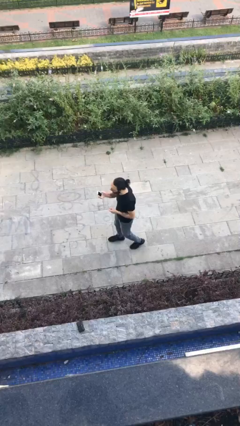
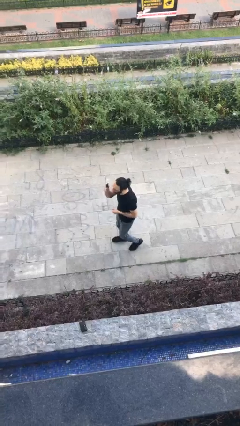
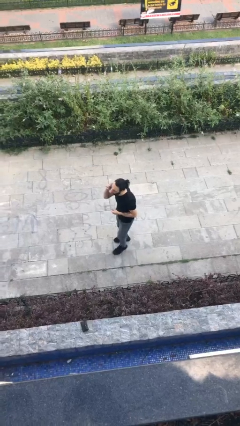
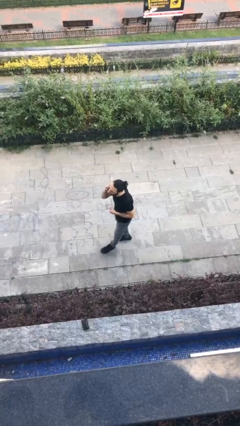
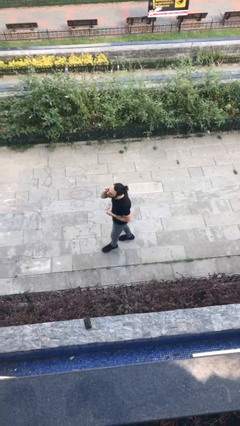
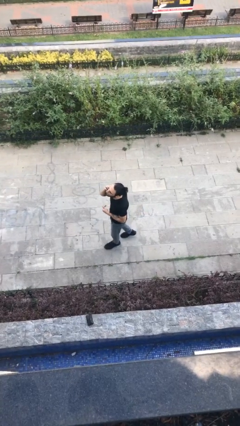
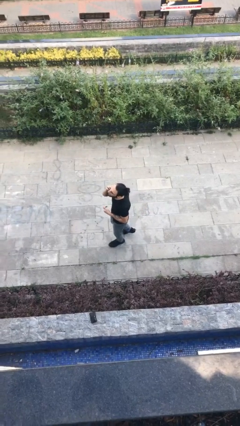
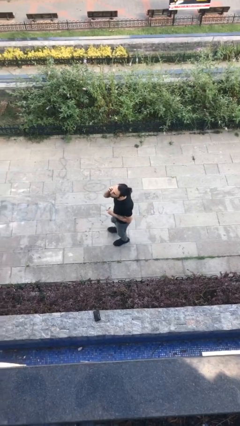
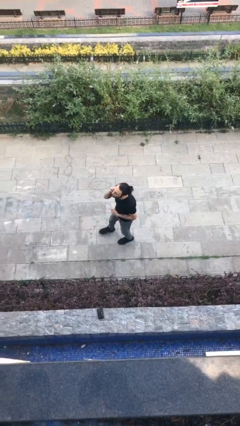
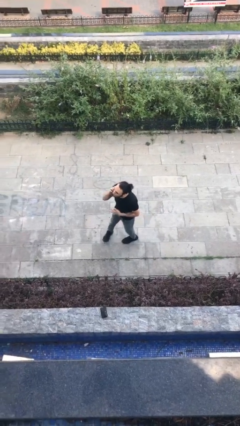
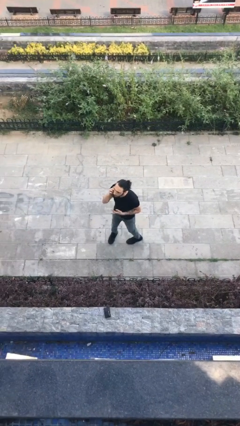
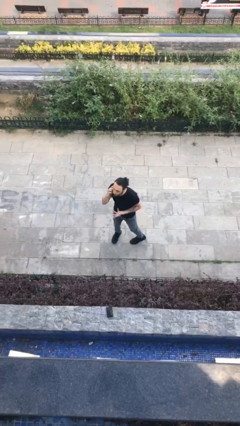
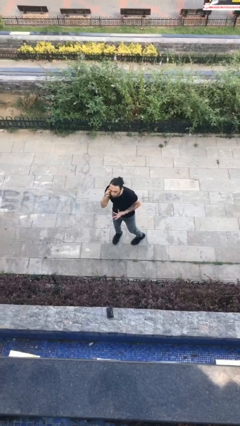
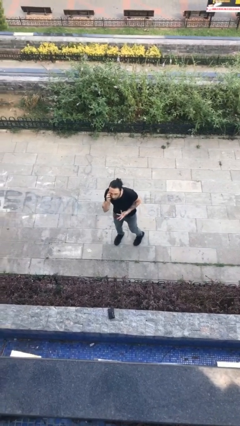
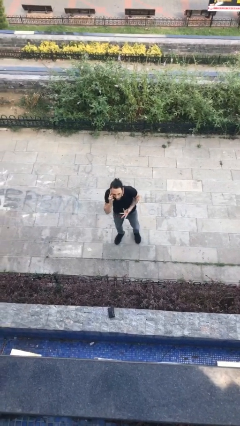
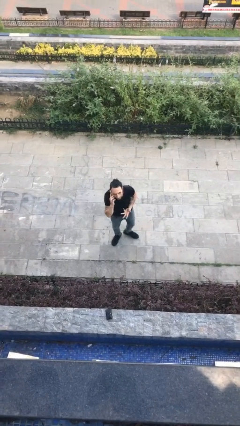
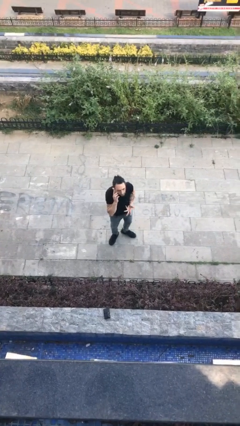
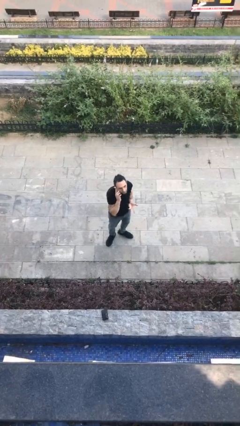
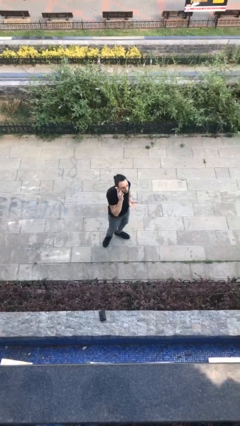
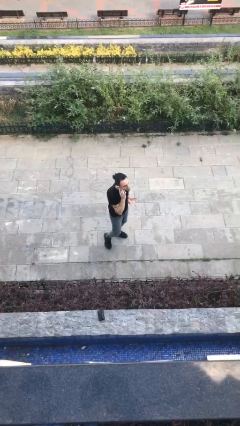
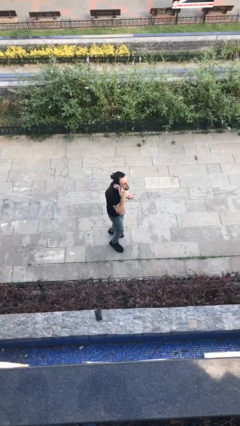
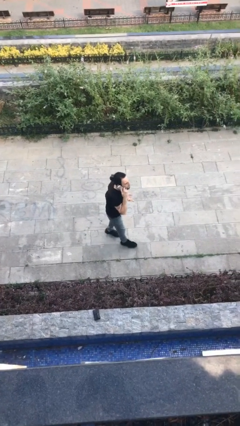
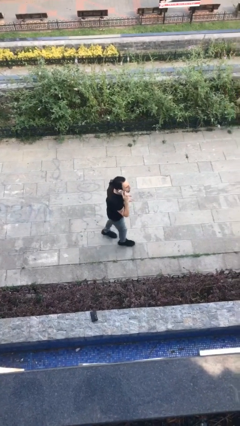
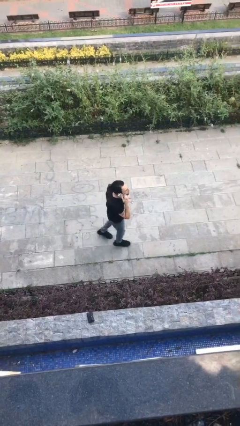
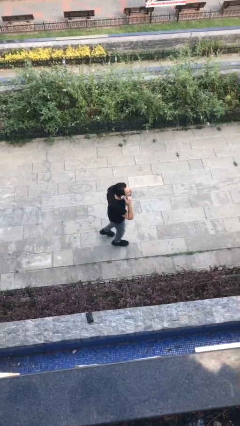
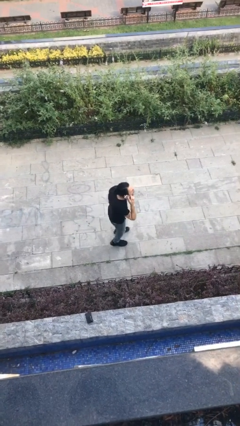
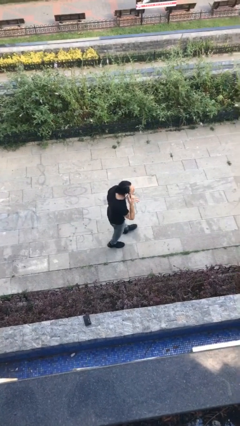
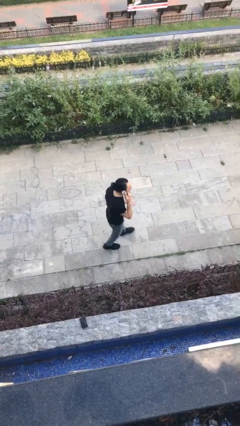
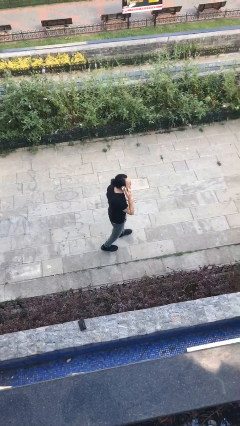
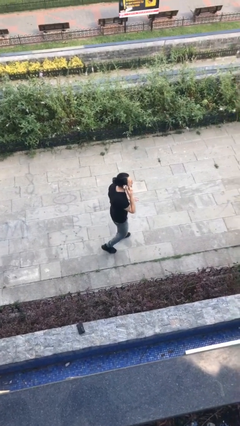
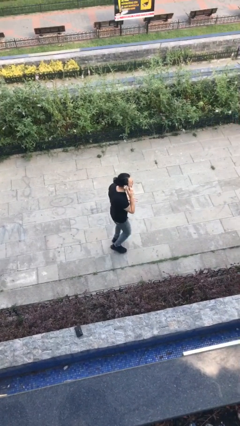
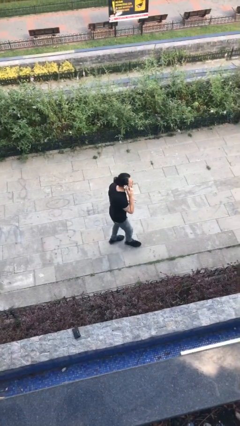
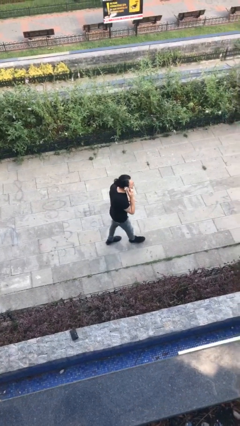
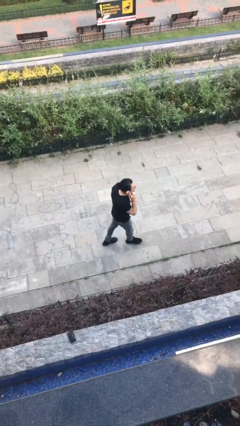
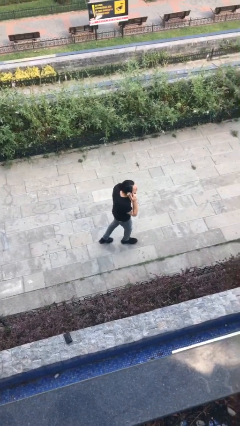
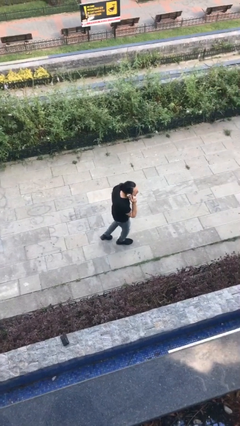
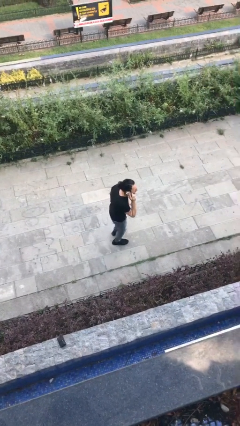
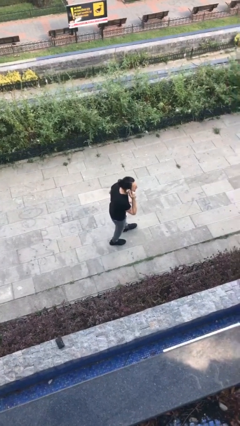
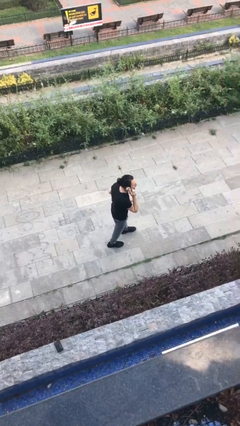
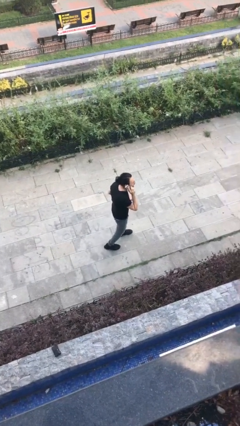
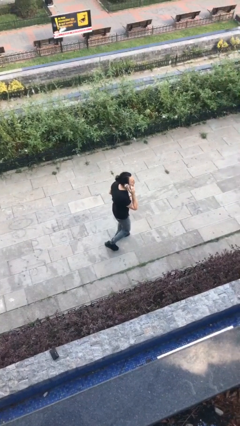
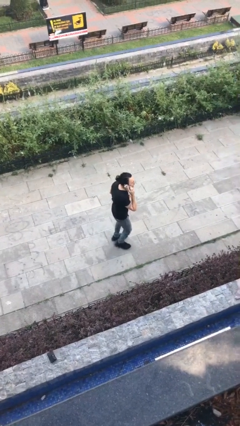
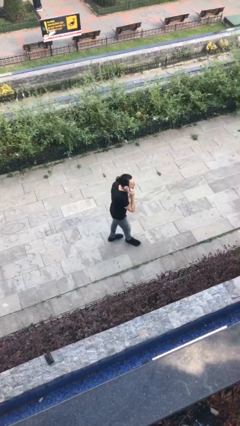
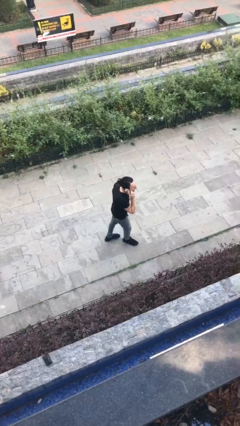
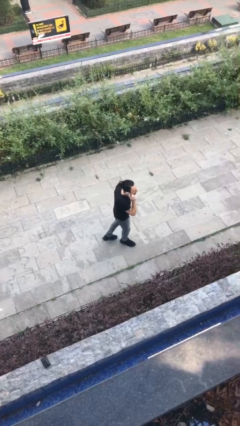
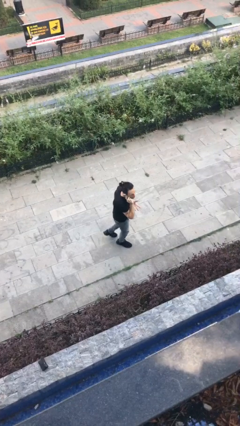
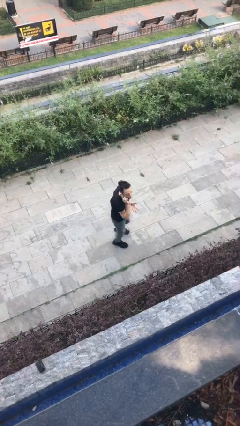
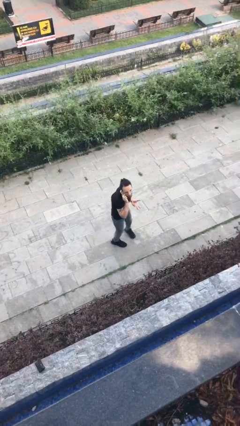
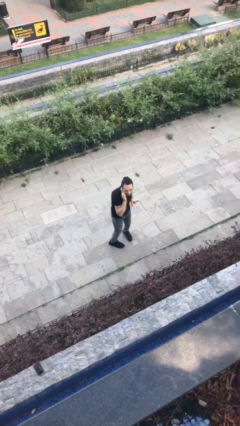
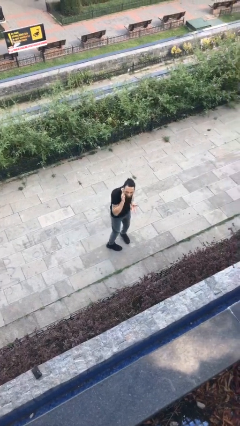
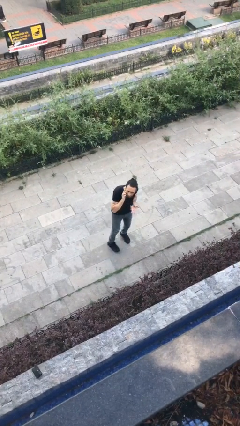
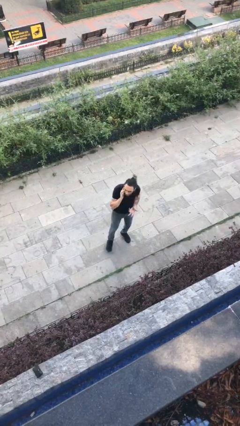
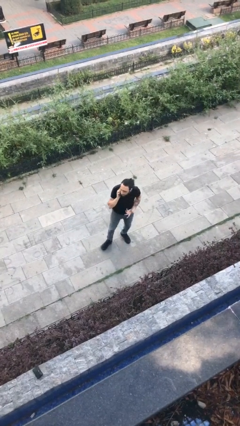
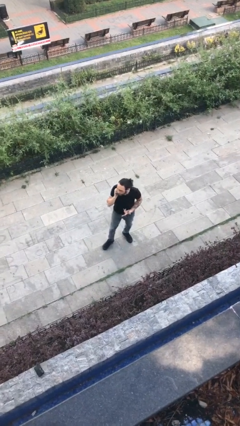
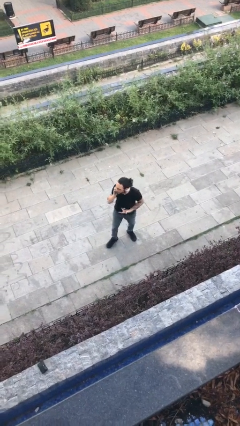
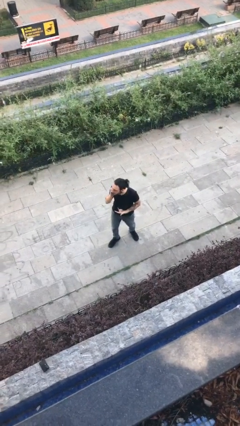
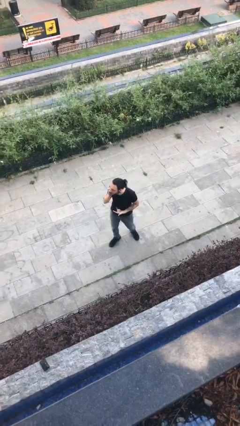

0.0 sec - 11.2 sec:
person talks on phone

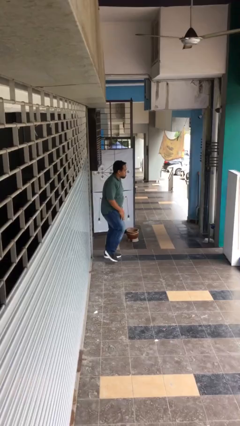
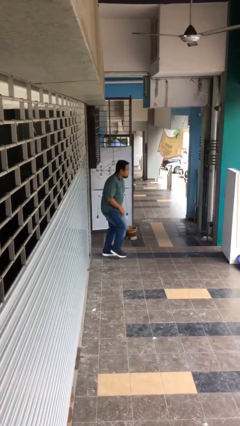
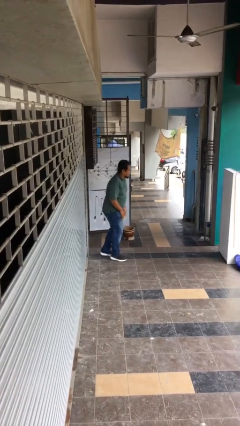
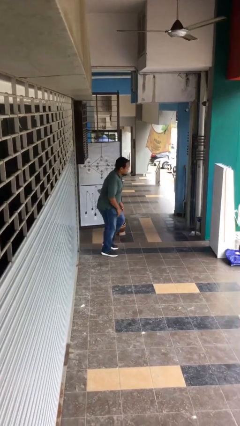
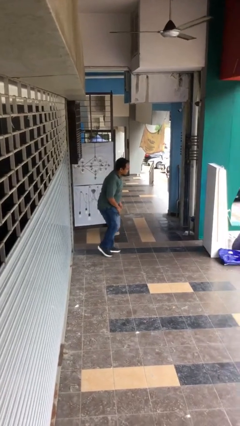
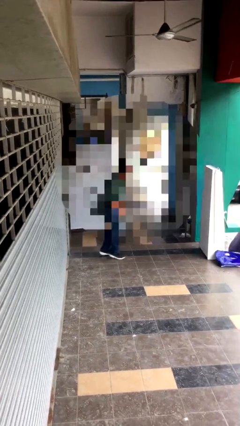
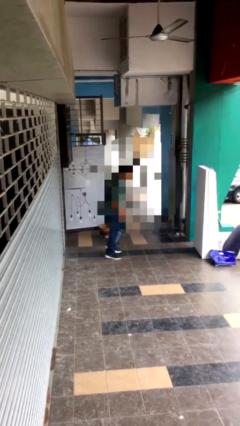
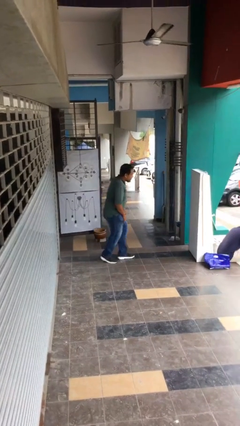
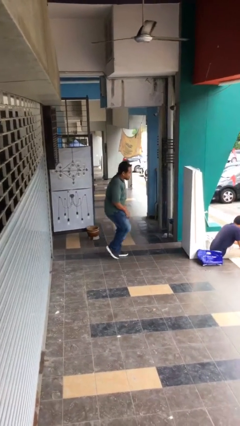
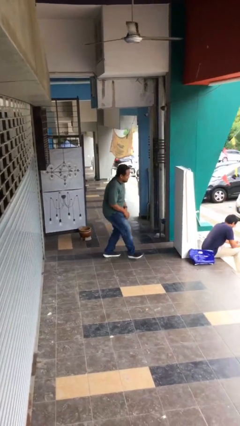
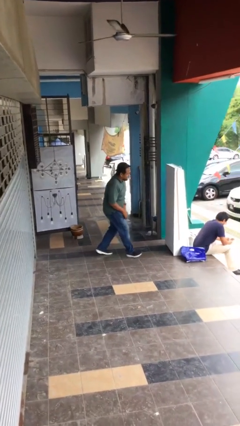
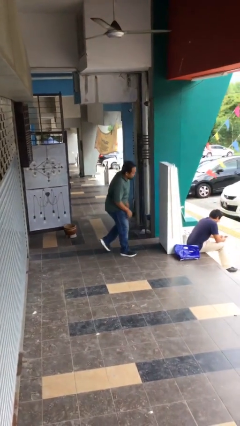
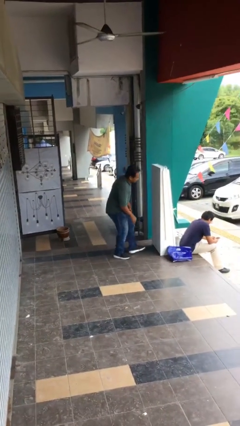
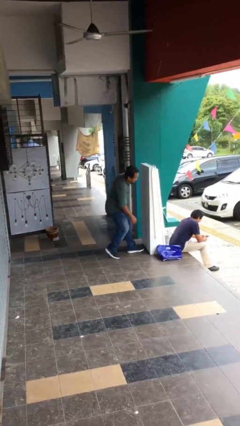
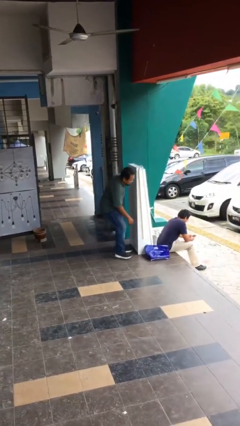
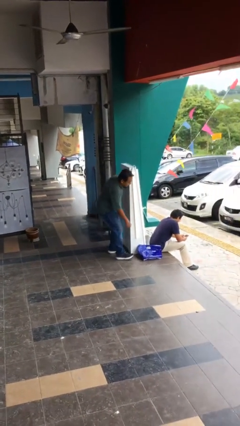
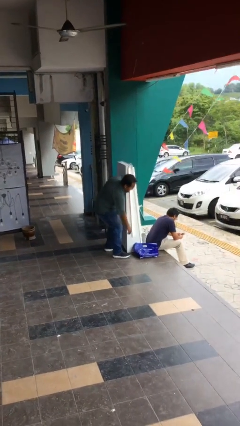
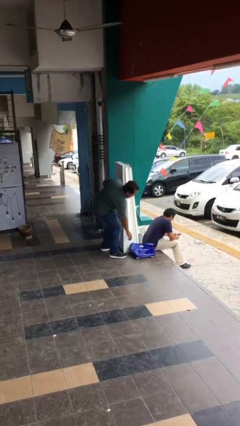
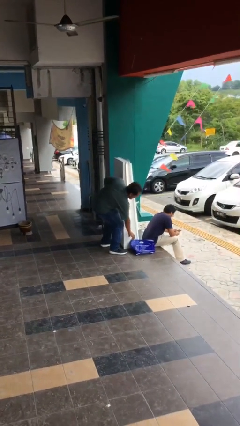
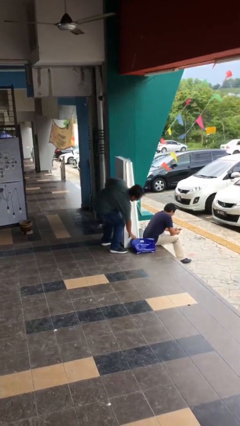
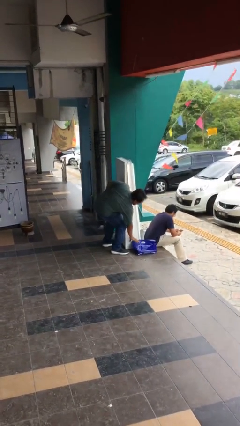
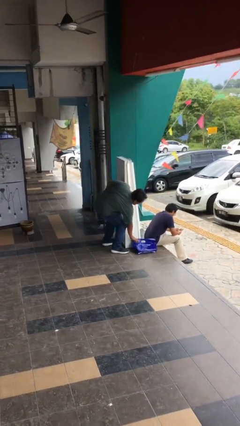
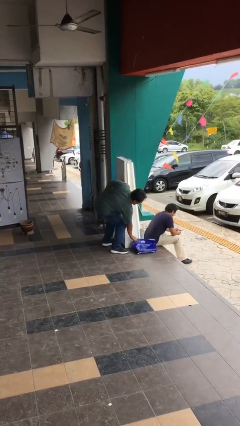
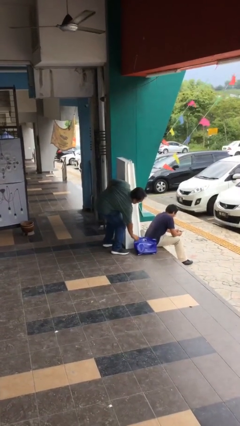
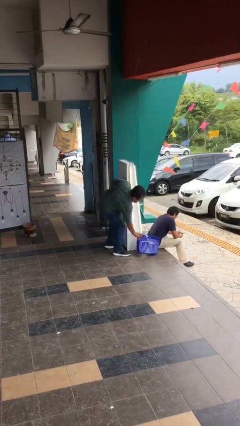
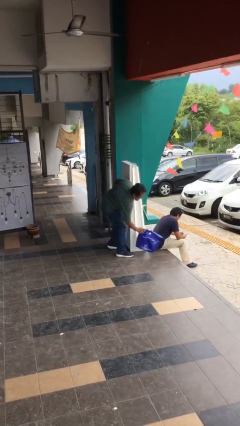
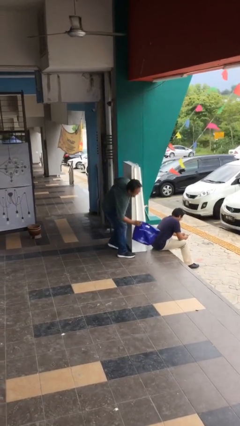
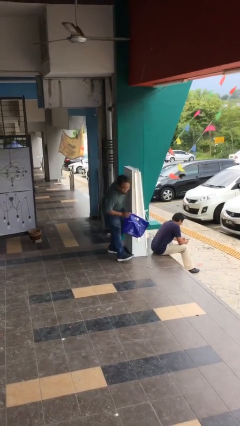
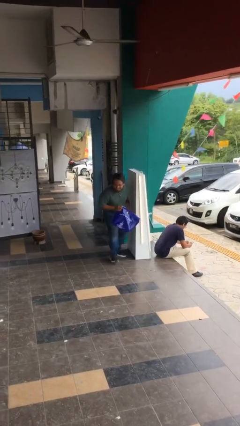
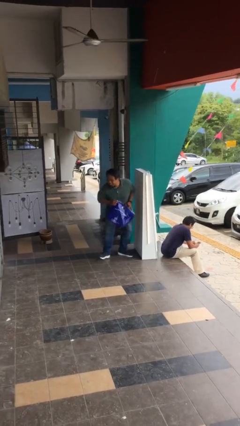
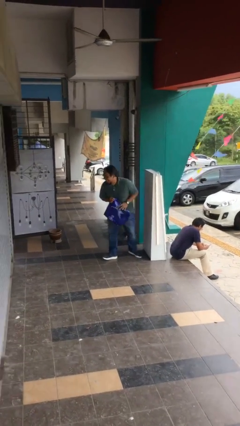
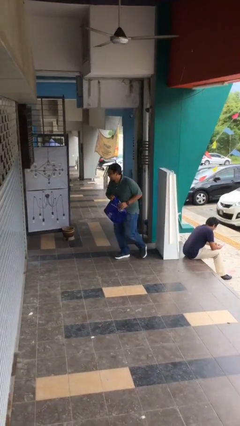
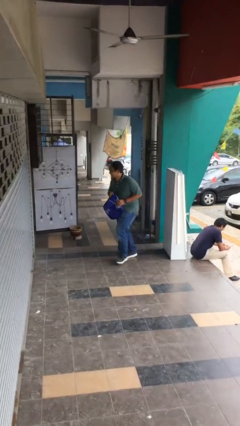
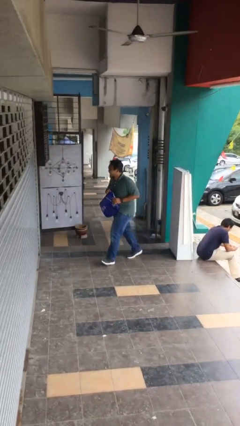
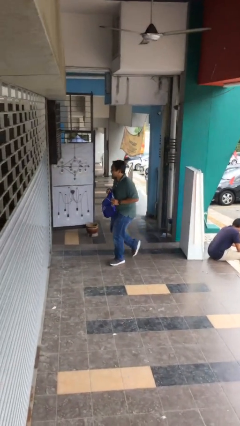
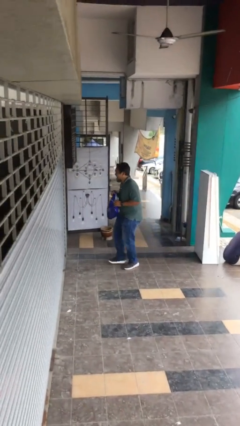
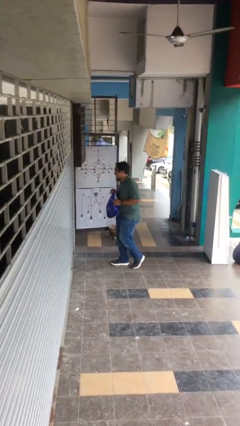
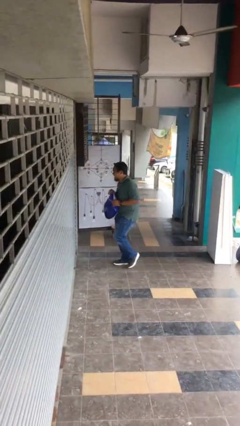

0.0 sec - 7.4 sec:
person steals object from person
